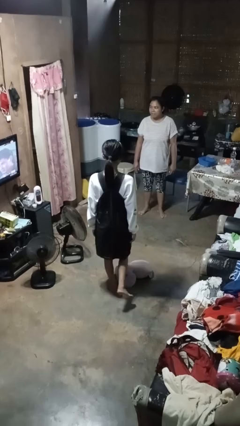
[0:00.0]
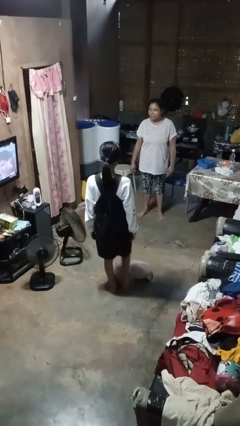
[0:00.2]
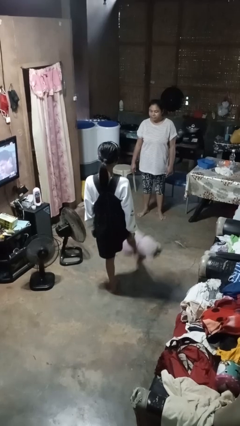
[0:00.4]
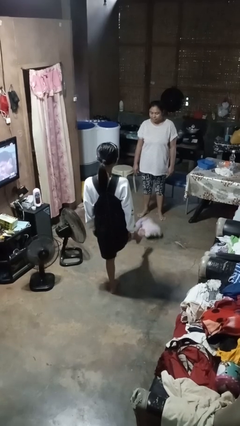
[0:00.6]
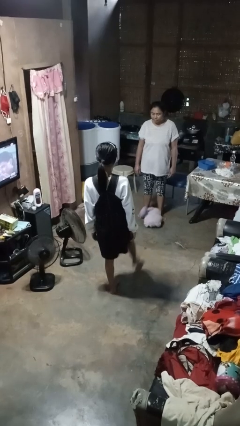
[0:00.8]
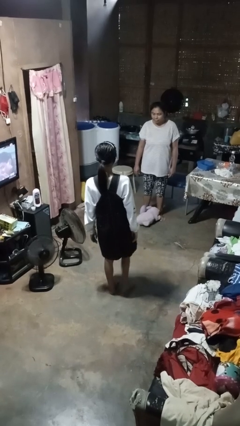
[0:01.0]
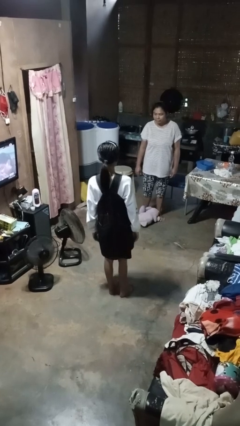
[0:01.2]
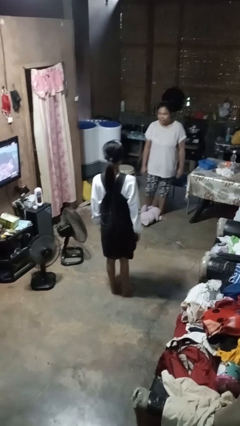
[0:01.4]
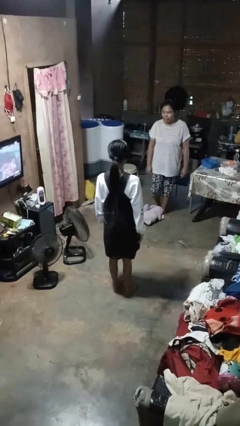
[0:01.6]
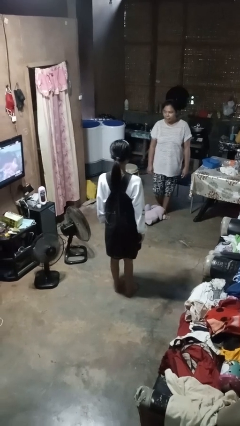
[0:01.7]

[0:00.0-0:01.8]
person kicks object to person

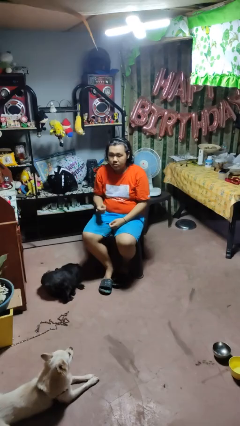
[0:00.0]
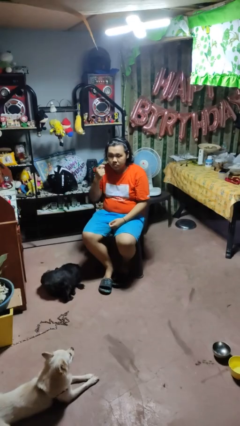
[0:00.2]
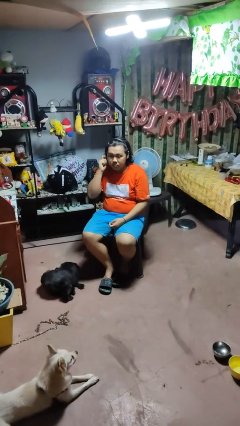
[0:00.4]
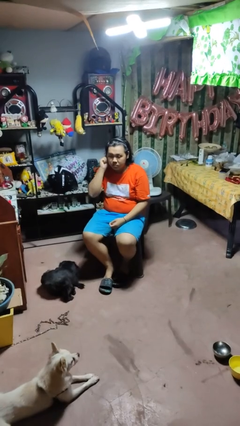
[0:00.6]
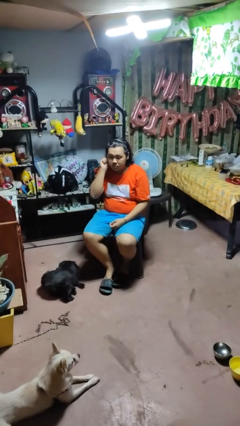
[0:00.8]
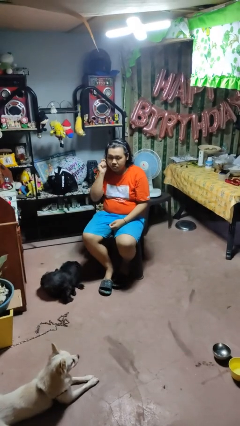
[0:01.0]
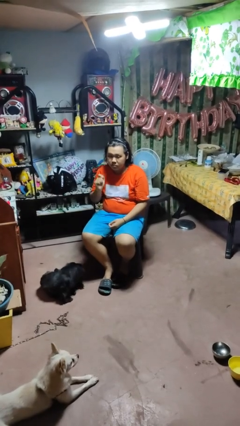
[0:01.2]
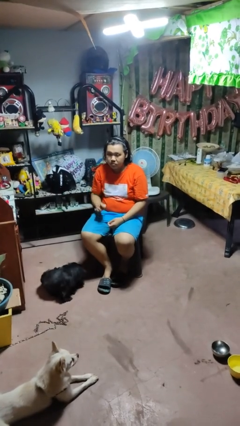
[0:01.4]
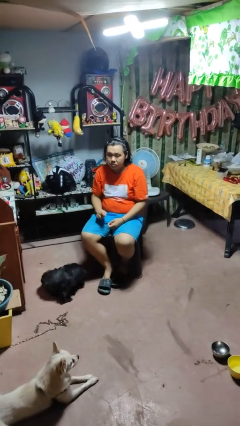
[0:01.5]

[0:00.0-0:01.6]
person takes off earrings

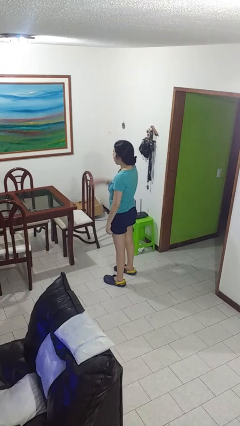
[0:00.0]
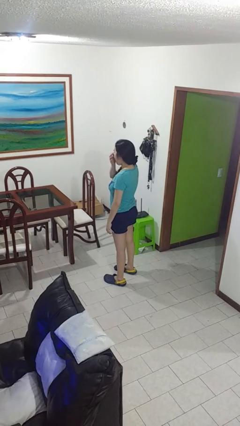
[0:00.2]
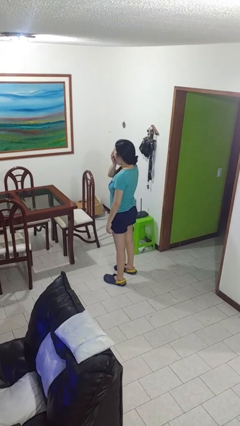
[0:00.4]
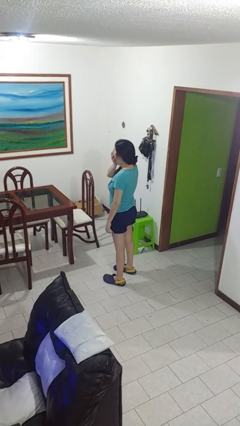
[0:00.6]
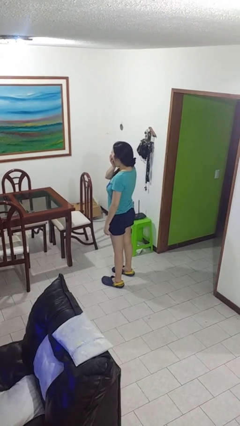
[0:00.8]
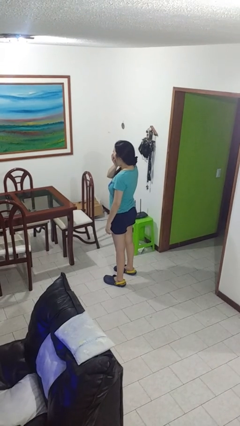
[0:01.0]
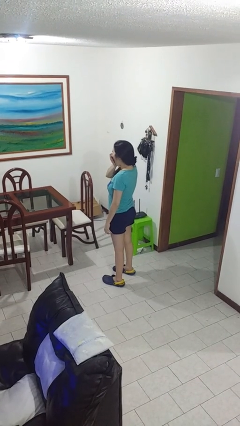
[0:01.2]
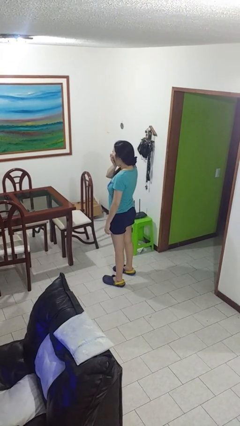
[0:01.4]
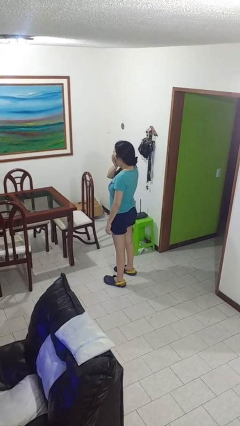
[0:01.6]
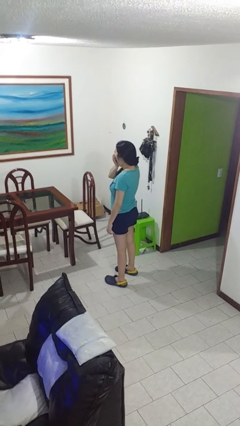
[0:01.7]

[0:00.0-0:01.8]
person yawns

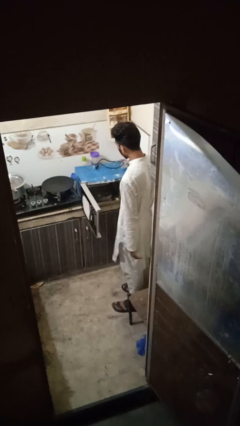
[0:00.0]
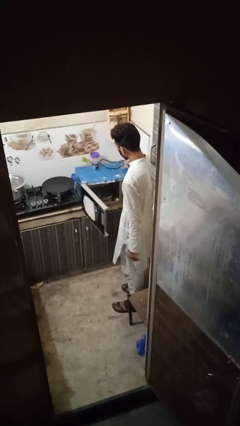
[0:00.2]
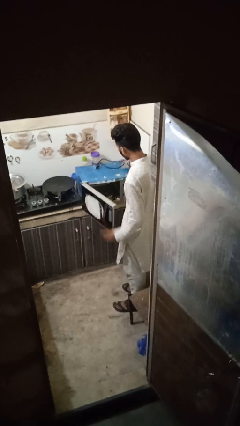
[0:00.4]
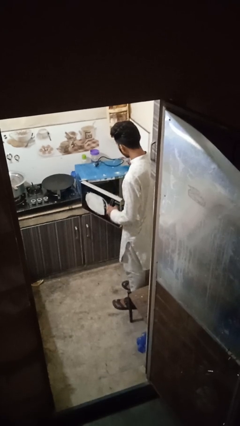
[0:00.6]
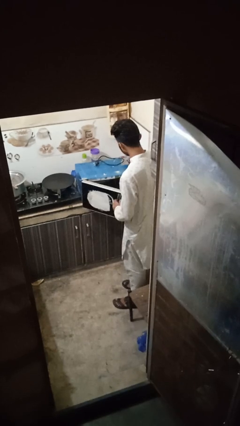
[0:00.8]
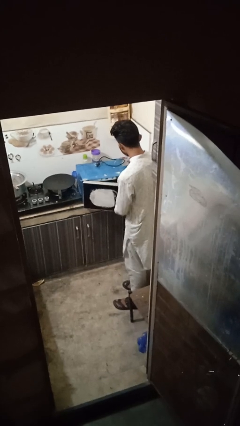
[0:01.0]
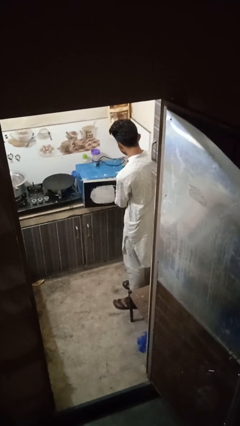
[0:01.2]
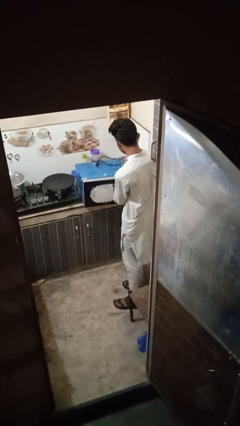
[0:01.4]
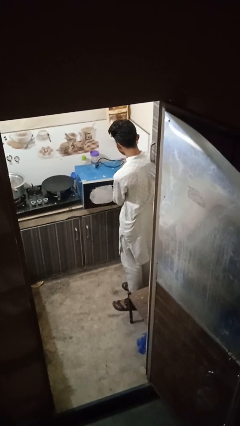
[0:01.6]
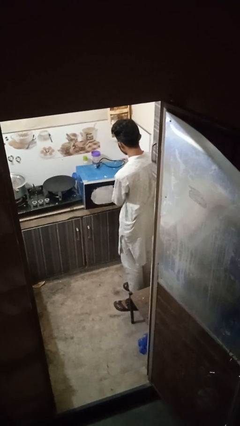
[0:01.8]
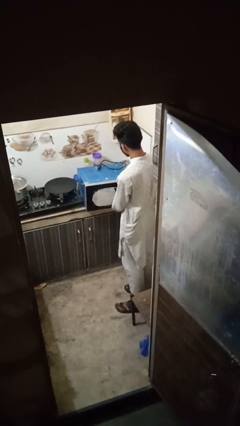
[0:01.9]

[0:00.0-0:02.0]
person closes oven door

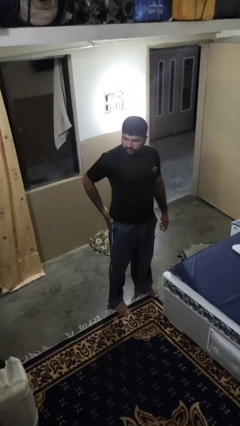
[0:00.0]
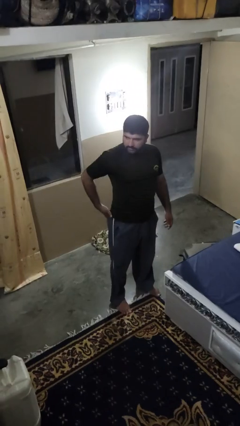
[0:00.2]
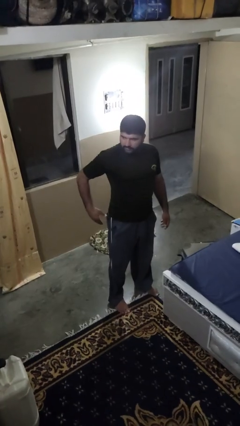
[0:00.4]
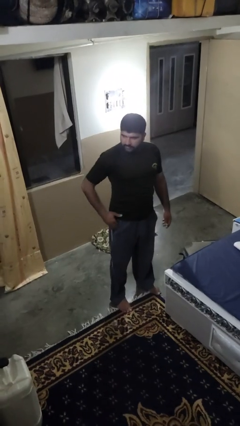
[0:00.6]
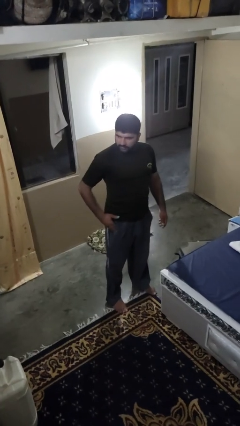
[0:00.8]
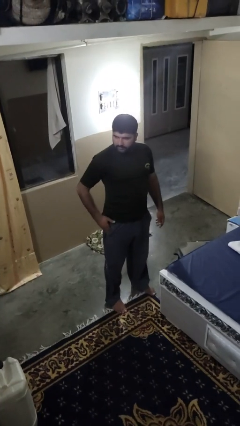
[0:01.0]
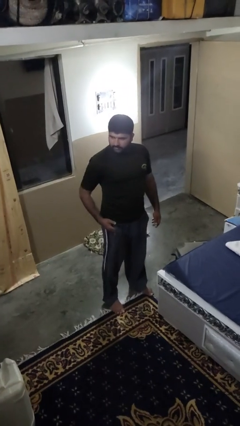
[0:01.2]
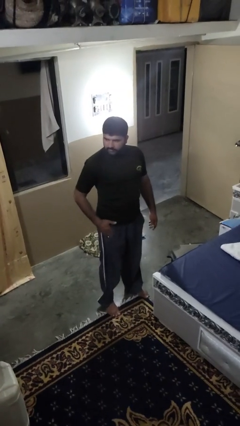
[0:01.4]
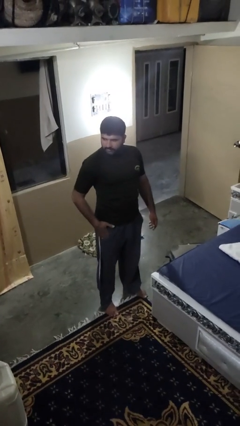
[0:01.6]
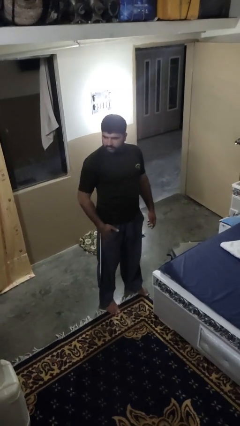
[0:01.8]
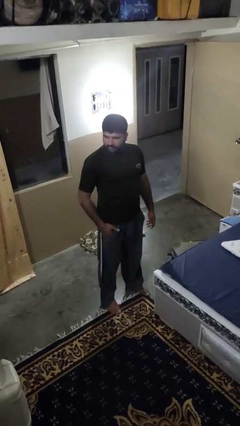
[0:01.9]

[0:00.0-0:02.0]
person puts hands in back pockets

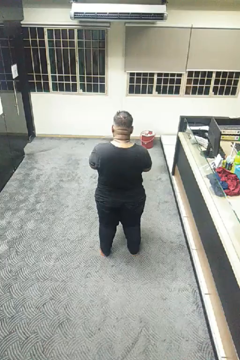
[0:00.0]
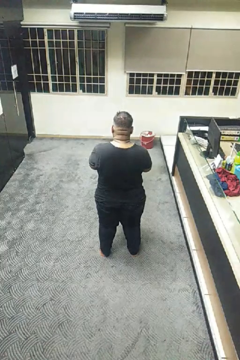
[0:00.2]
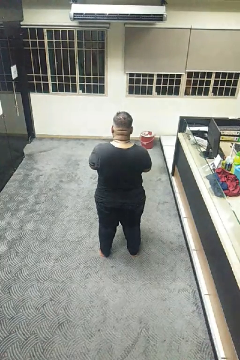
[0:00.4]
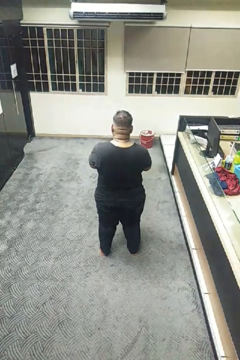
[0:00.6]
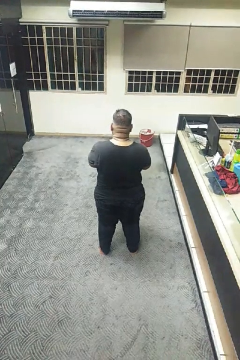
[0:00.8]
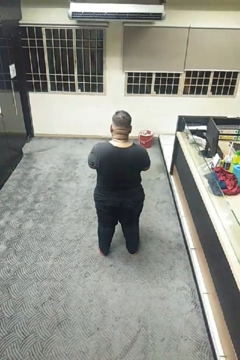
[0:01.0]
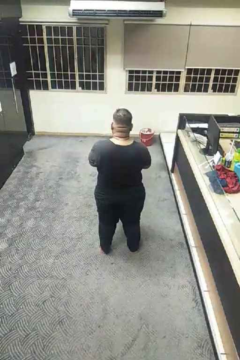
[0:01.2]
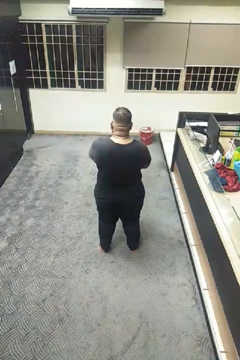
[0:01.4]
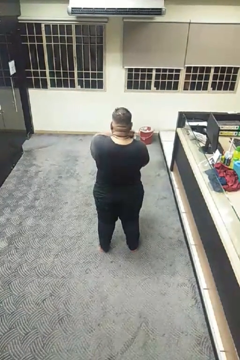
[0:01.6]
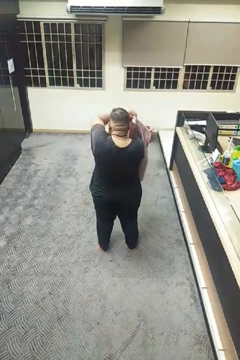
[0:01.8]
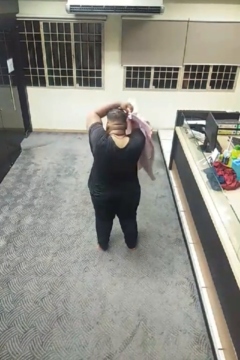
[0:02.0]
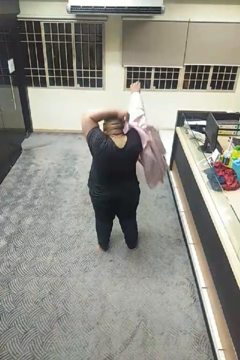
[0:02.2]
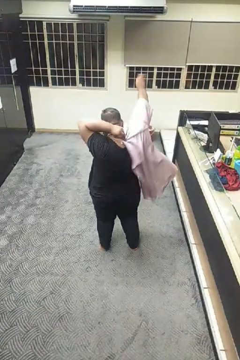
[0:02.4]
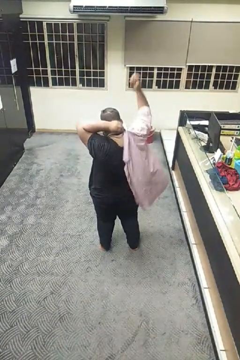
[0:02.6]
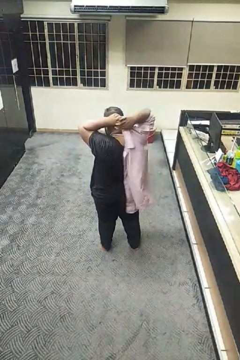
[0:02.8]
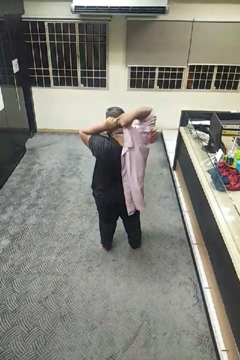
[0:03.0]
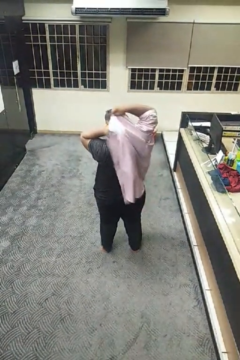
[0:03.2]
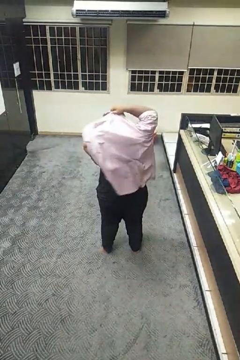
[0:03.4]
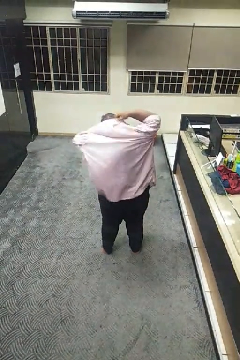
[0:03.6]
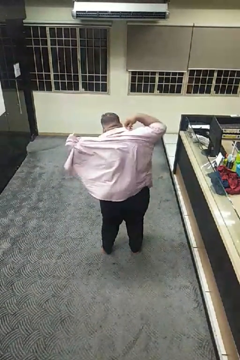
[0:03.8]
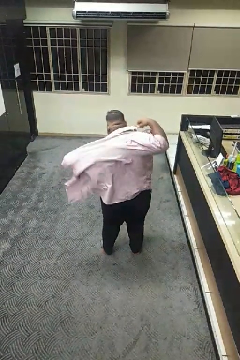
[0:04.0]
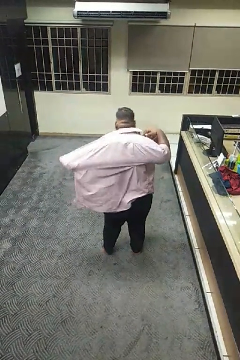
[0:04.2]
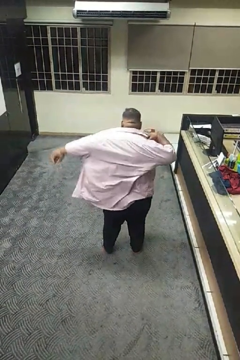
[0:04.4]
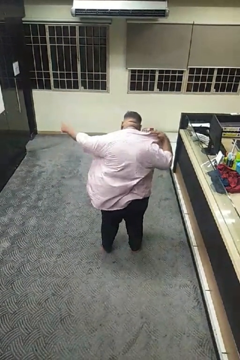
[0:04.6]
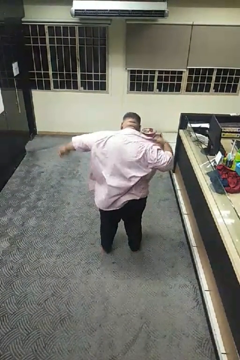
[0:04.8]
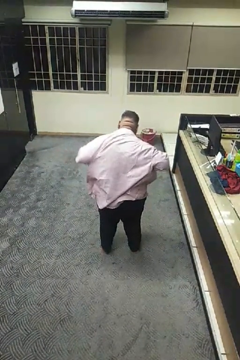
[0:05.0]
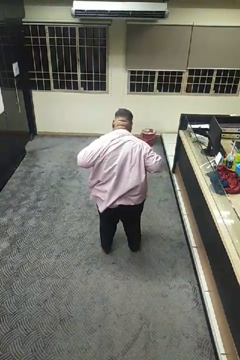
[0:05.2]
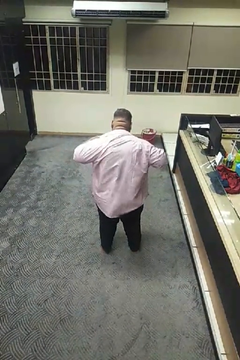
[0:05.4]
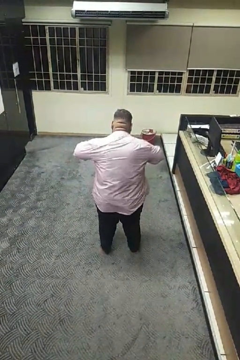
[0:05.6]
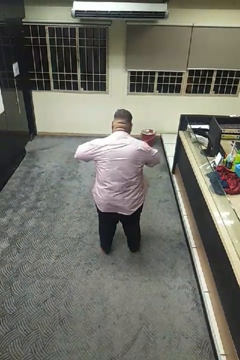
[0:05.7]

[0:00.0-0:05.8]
person puts on shirt

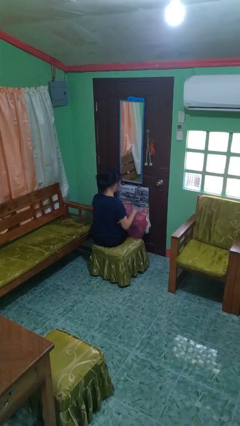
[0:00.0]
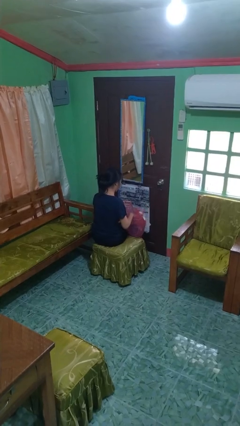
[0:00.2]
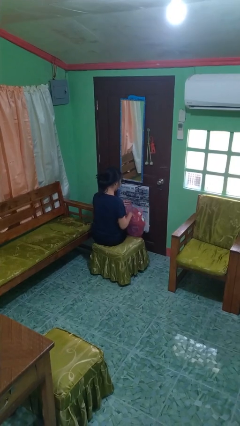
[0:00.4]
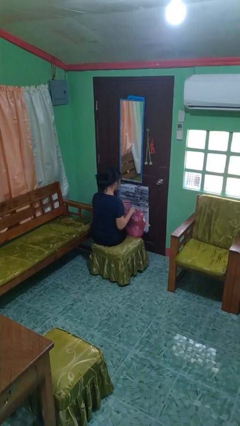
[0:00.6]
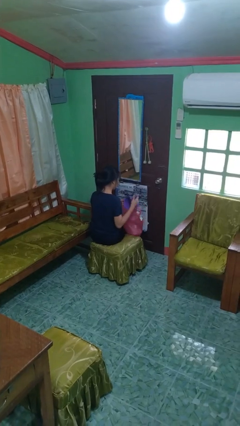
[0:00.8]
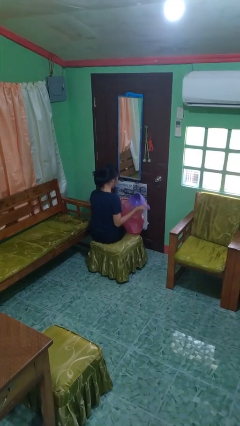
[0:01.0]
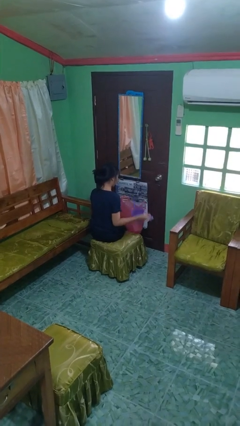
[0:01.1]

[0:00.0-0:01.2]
person takes object from bag

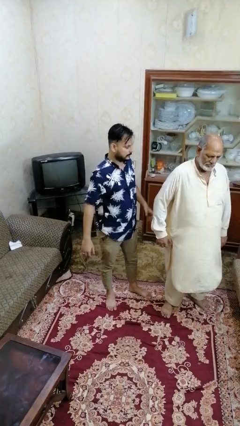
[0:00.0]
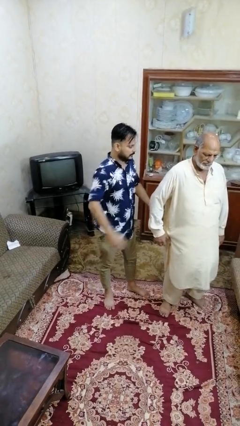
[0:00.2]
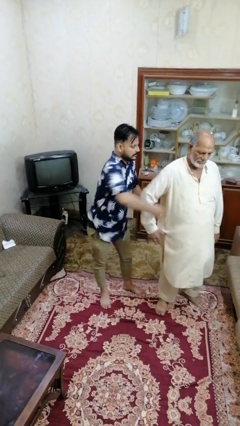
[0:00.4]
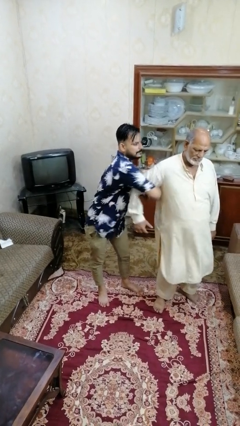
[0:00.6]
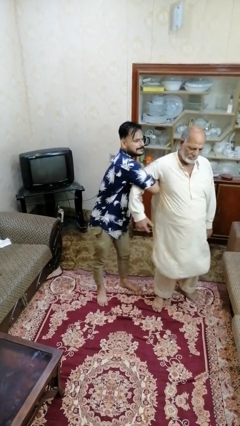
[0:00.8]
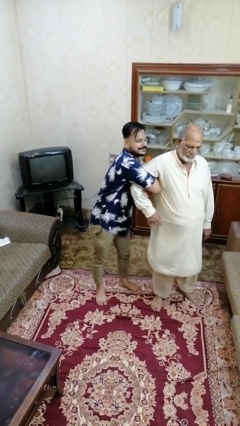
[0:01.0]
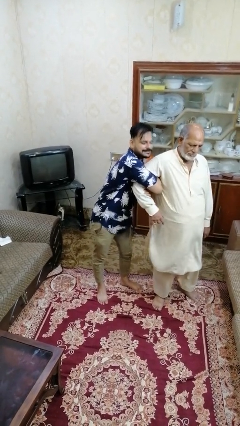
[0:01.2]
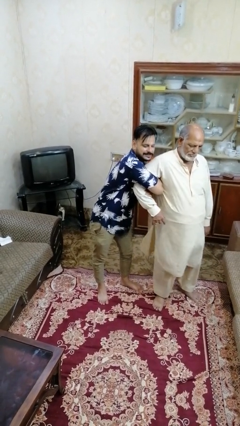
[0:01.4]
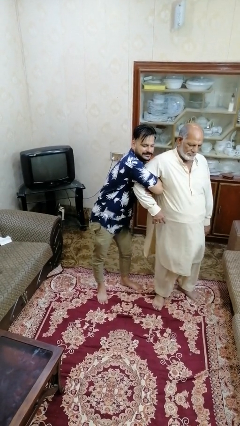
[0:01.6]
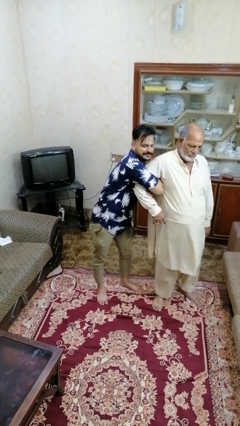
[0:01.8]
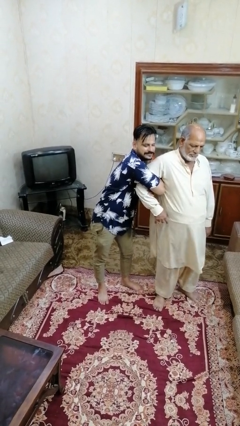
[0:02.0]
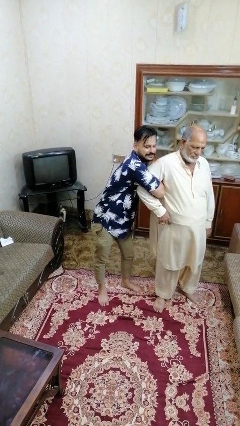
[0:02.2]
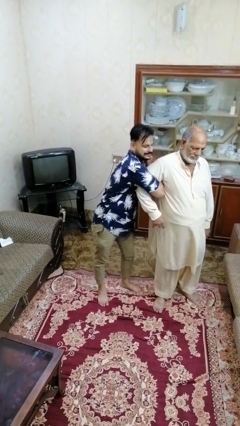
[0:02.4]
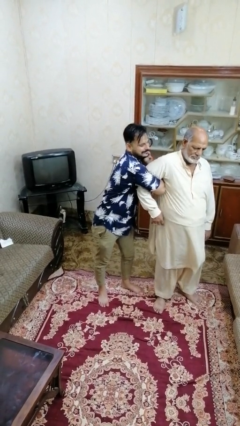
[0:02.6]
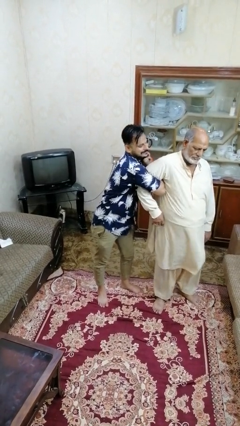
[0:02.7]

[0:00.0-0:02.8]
person grabs person by bicep
